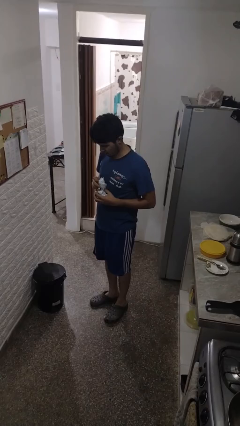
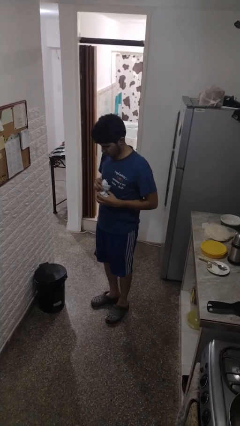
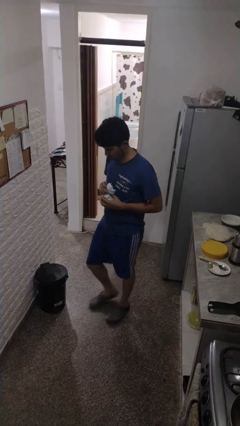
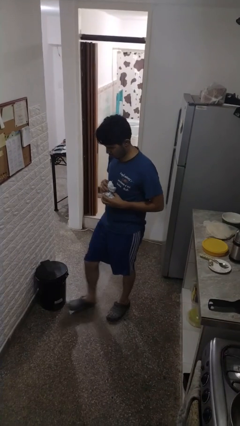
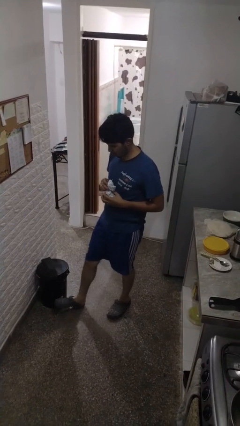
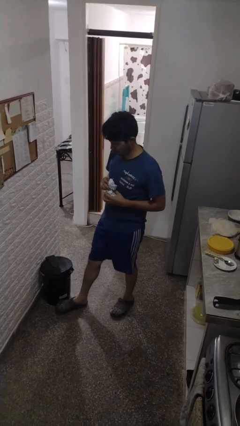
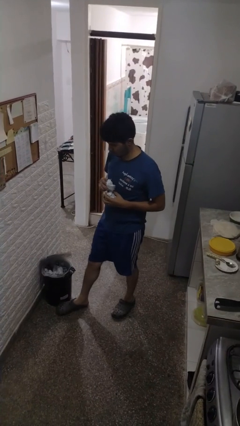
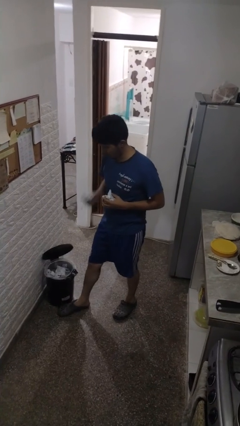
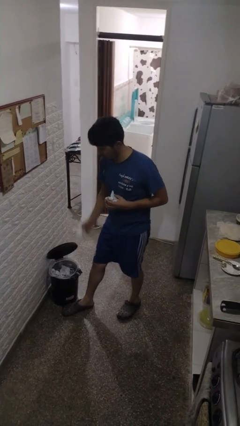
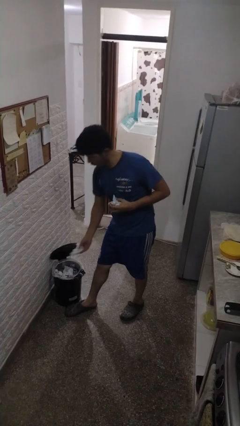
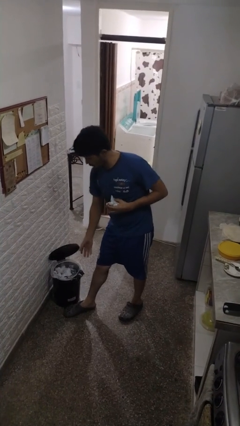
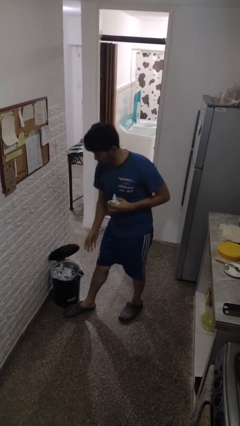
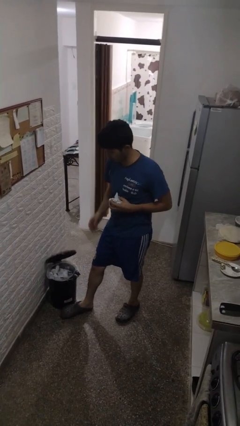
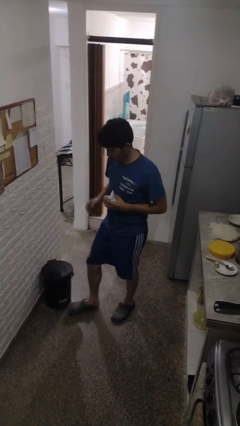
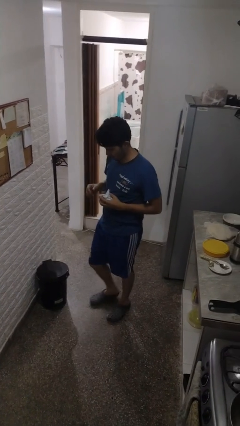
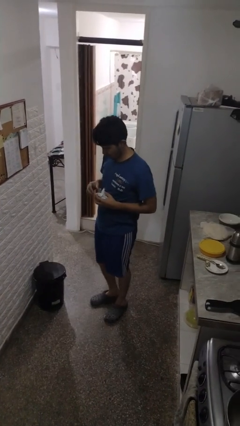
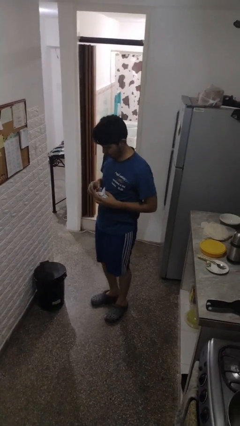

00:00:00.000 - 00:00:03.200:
person discards trash

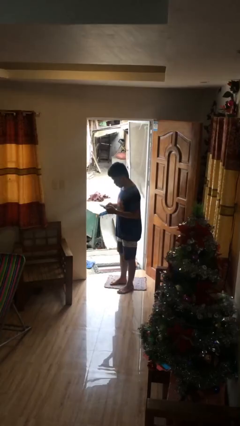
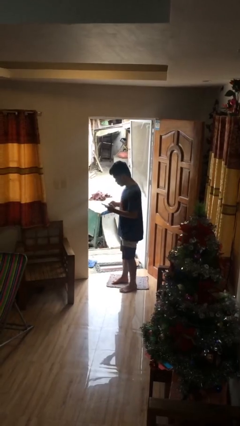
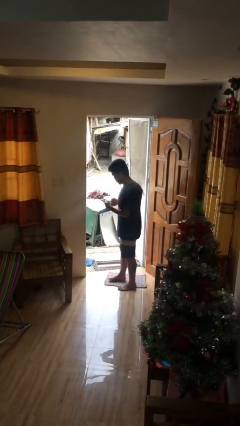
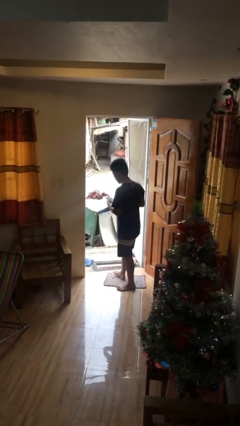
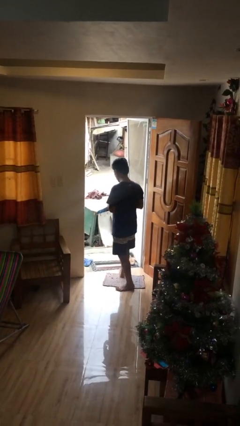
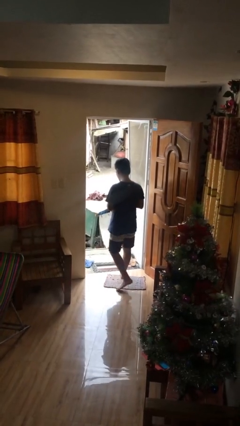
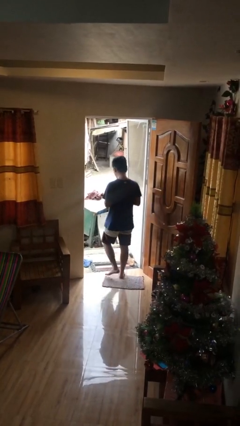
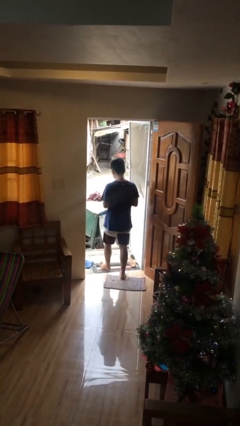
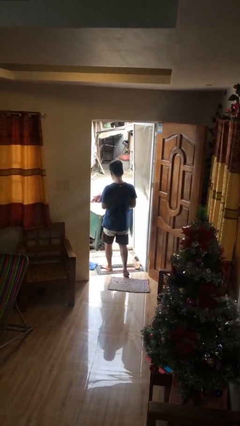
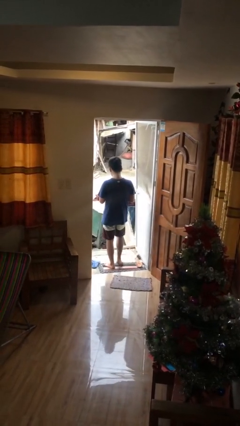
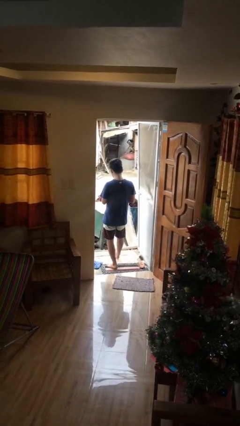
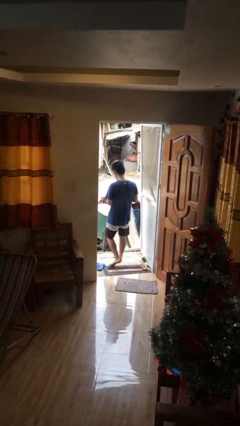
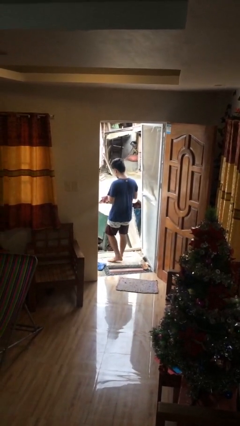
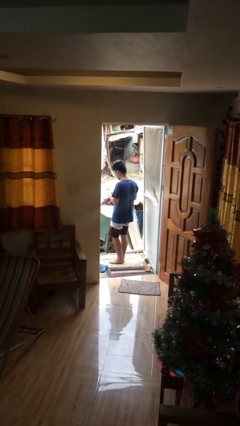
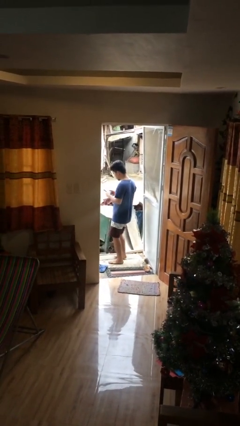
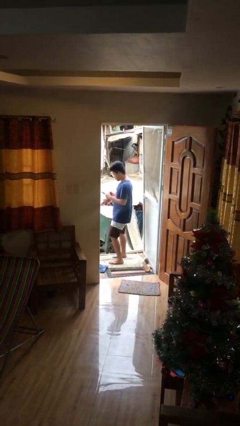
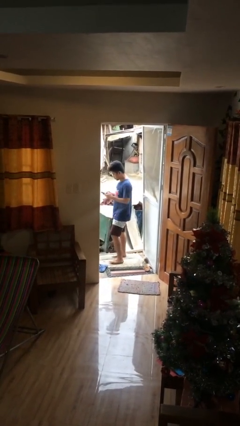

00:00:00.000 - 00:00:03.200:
person exits scene through structure

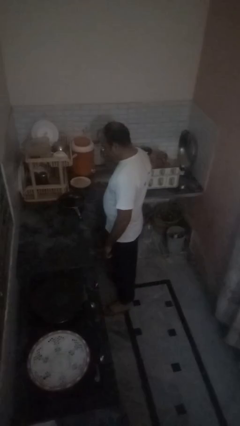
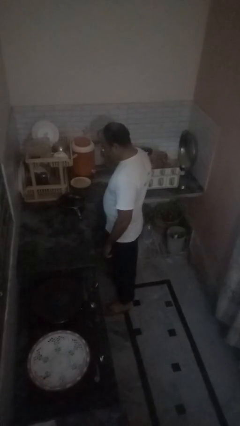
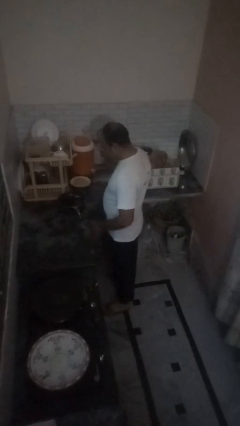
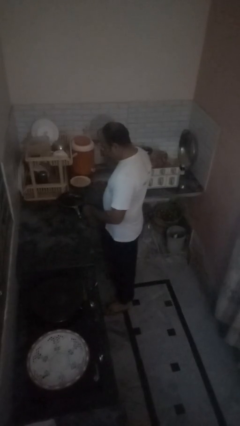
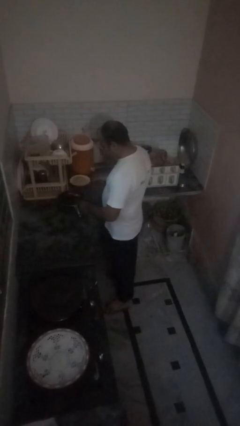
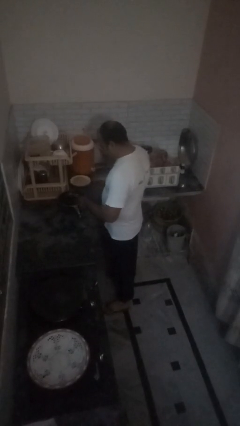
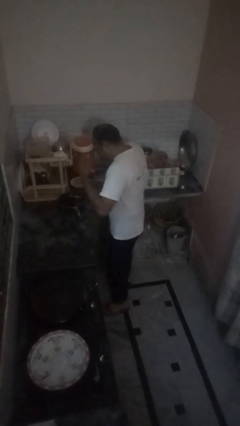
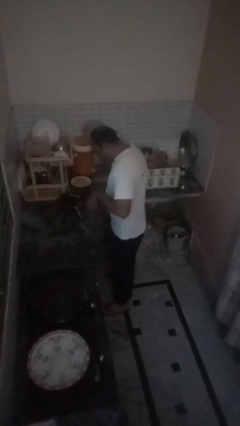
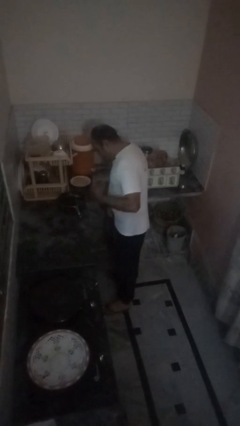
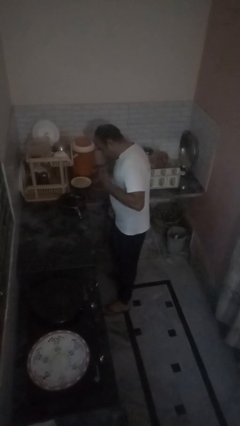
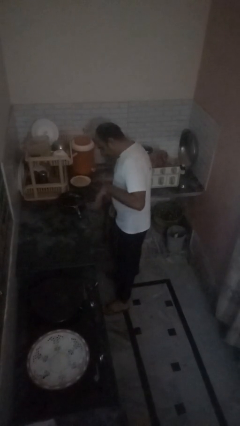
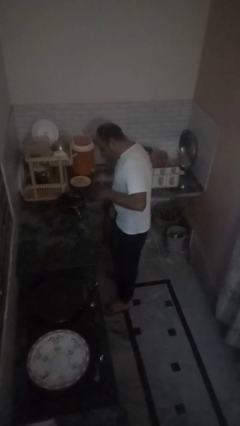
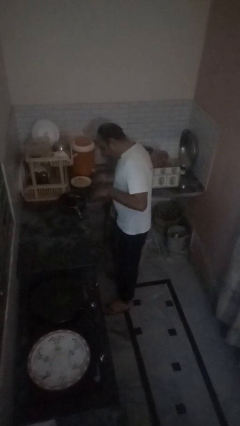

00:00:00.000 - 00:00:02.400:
person burns hand

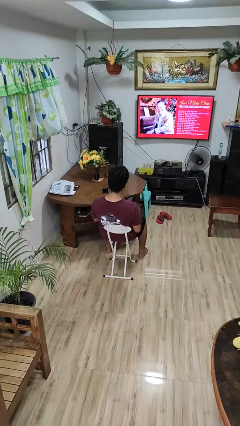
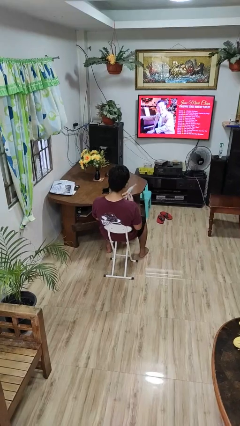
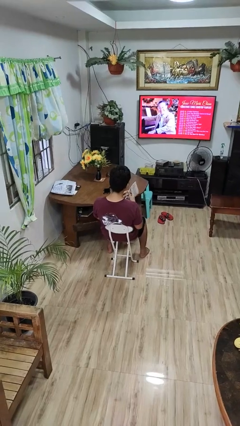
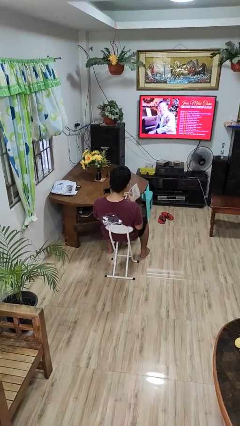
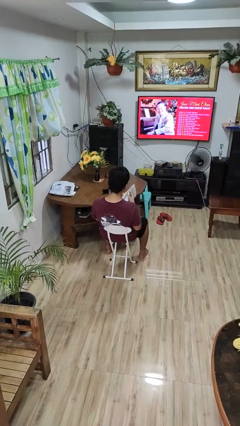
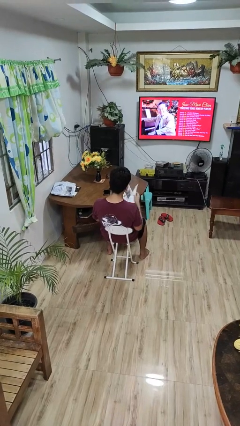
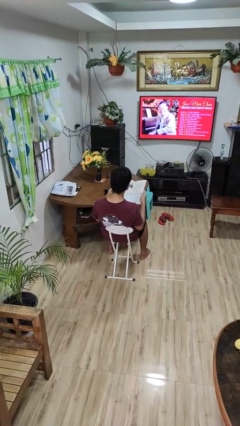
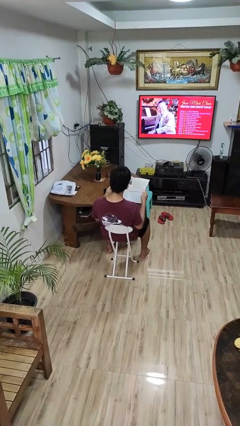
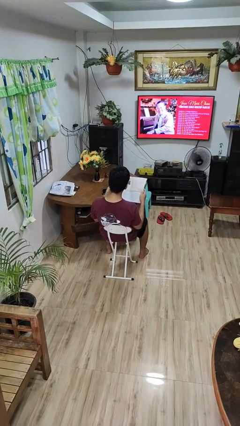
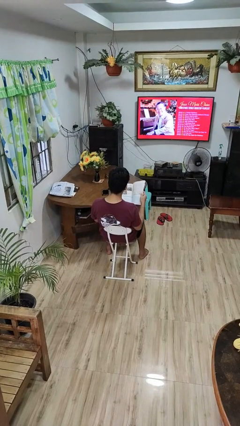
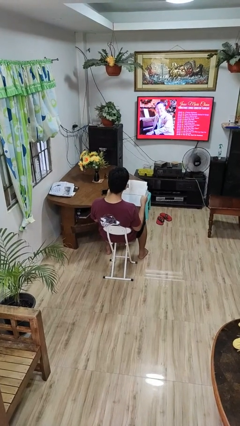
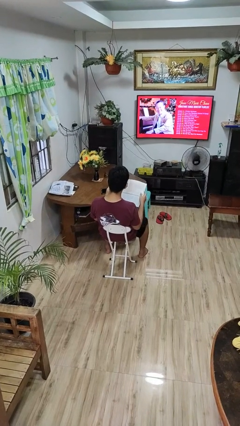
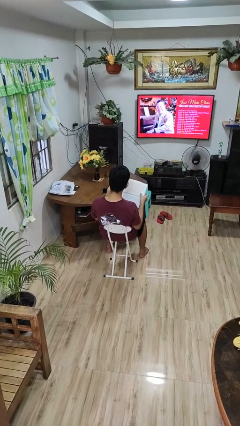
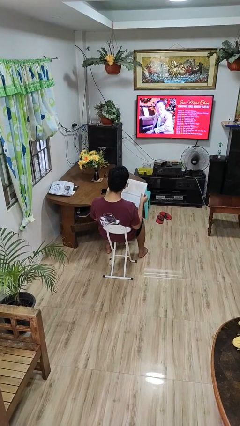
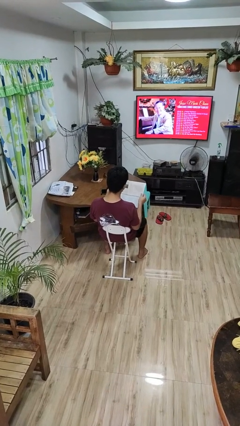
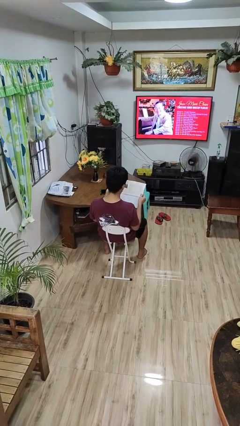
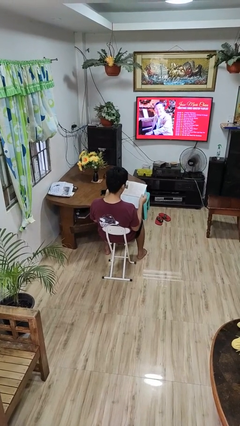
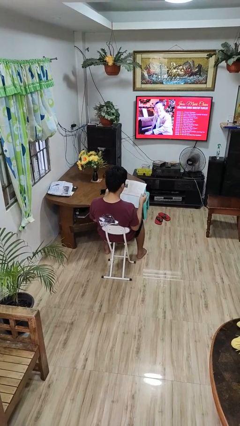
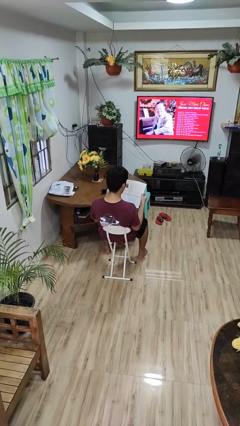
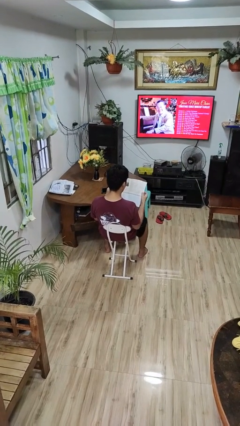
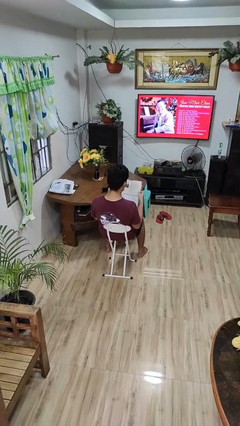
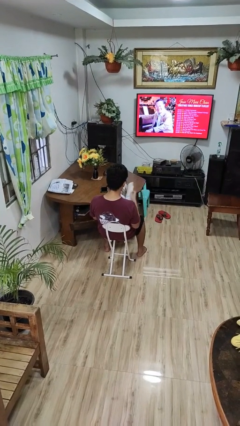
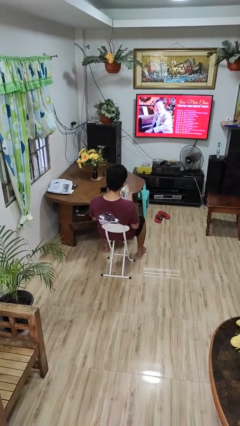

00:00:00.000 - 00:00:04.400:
person reads magazine

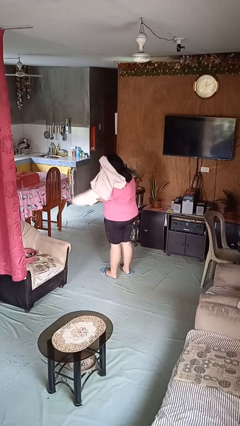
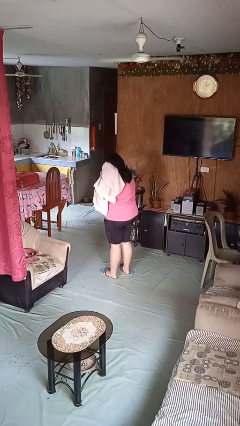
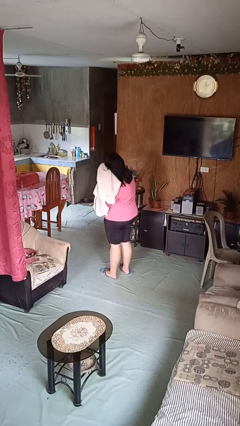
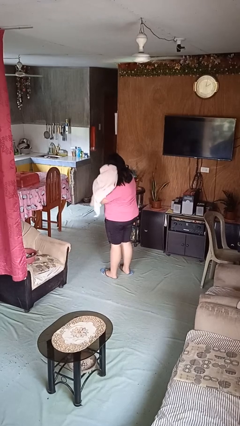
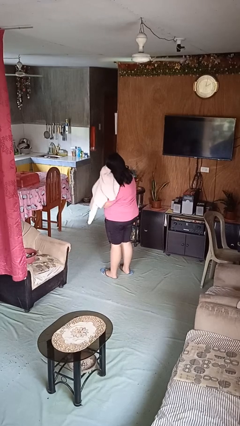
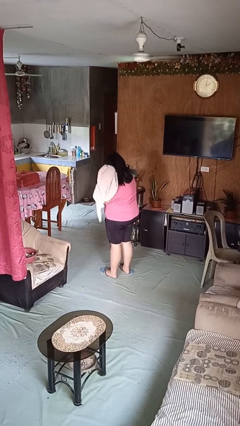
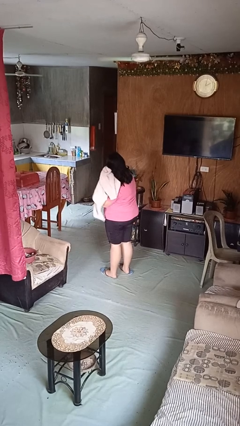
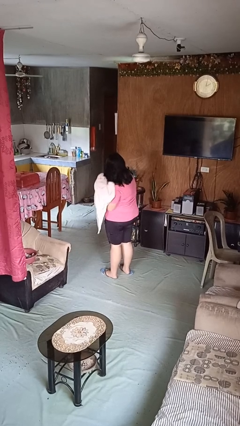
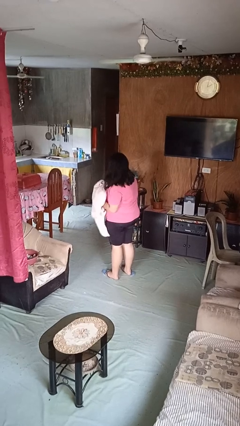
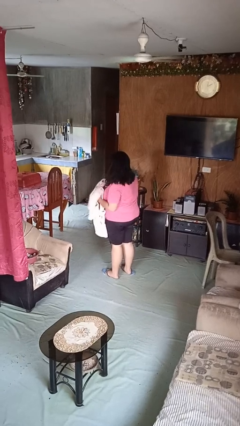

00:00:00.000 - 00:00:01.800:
person dries hair with towel

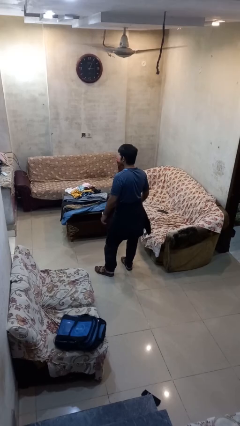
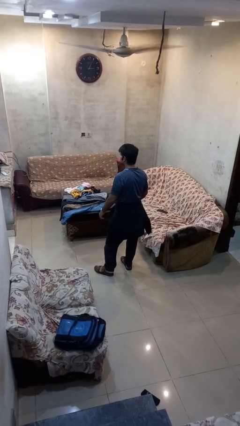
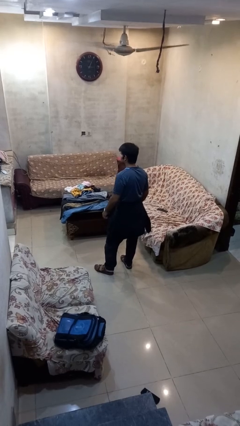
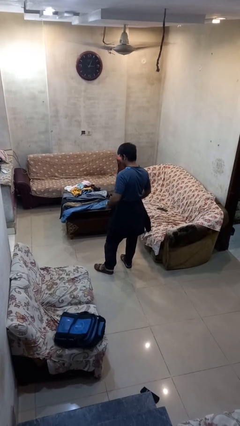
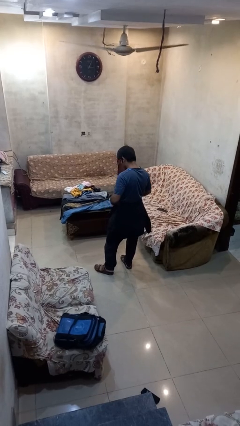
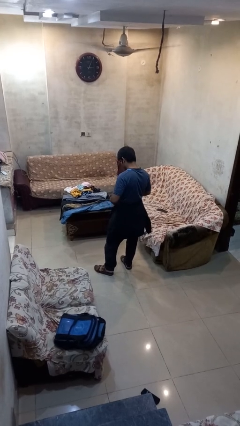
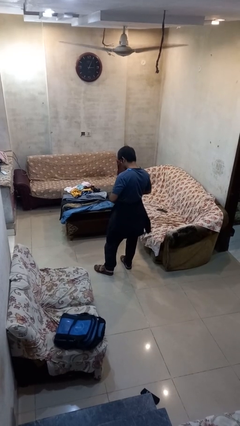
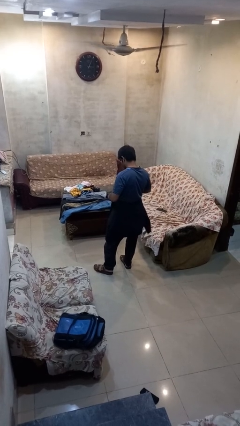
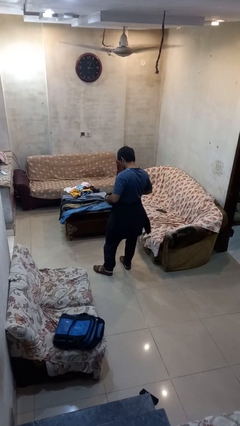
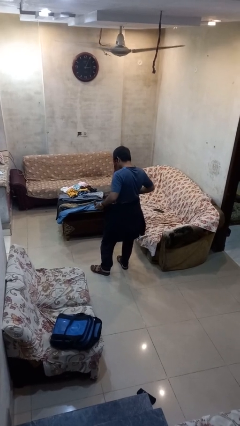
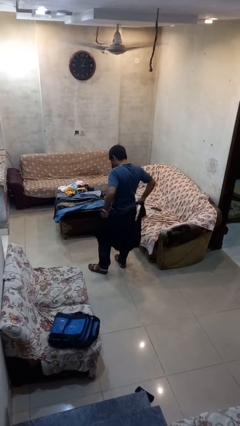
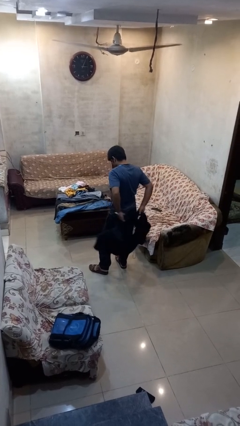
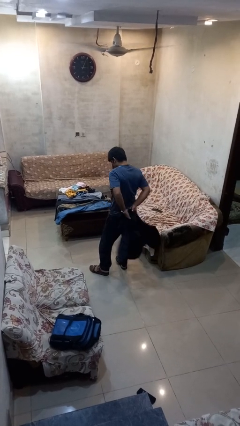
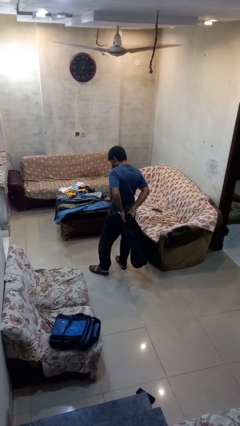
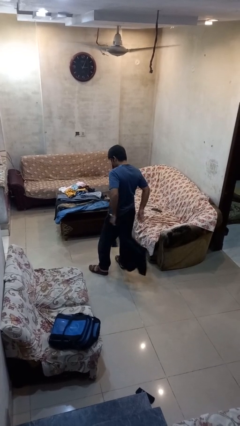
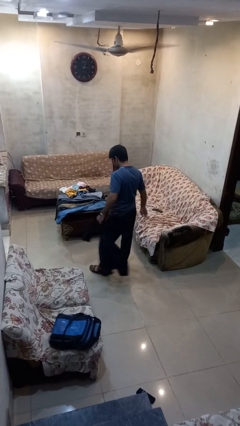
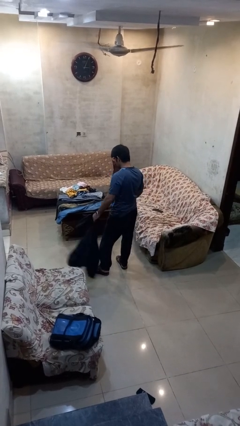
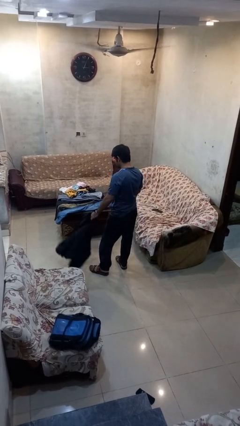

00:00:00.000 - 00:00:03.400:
person unties jacket around waist
